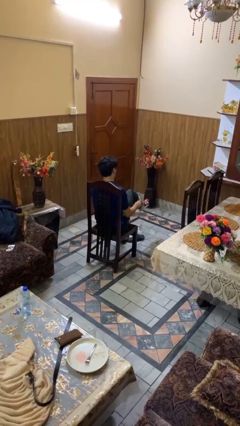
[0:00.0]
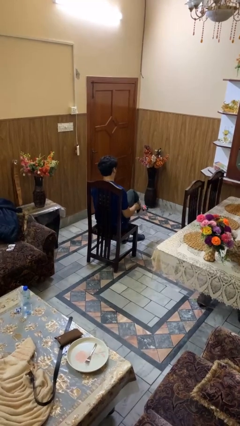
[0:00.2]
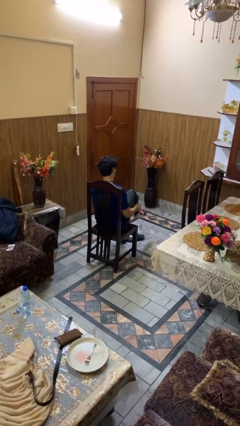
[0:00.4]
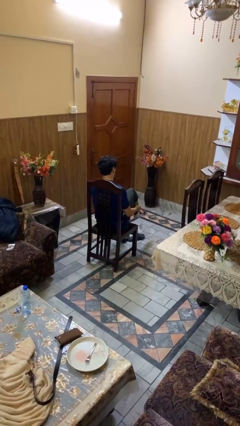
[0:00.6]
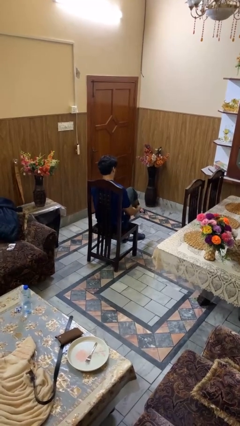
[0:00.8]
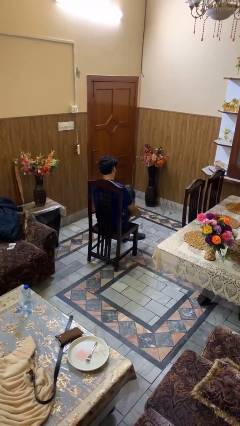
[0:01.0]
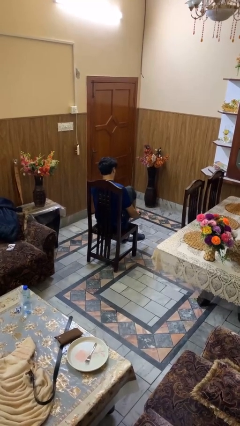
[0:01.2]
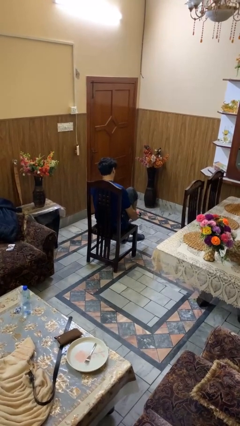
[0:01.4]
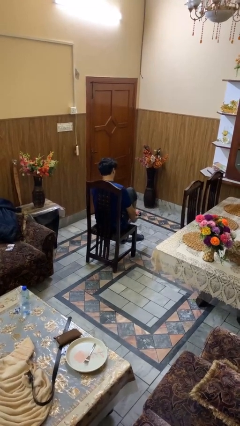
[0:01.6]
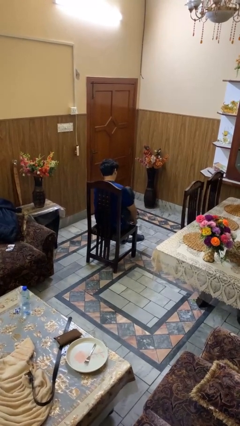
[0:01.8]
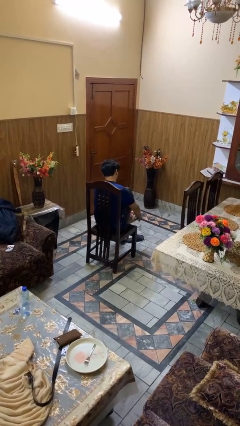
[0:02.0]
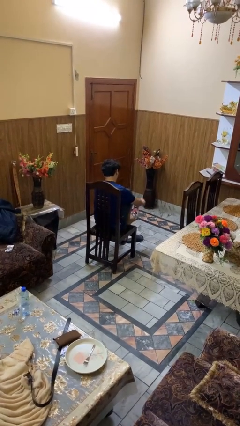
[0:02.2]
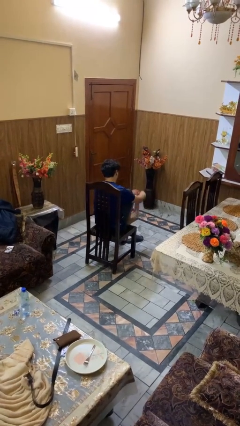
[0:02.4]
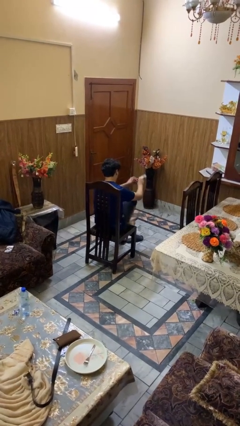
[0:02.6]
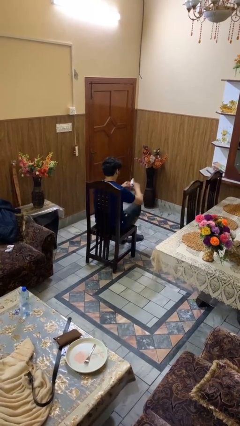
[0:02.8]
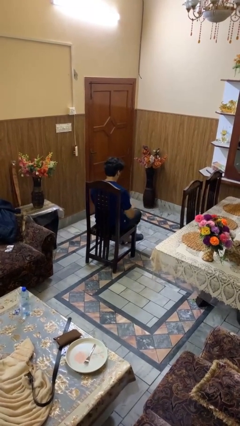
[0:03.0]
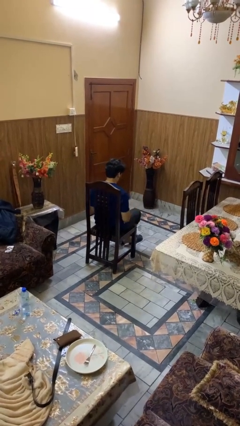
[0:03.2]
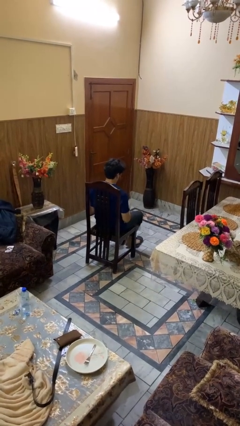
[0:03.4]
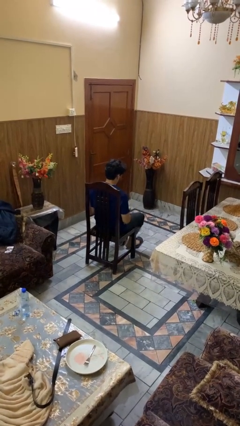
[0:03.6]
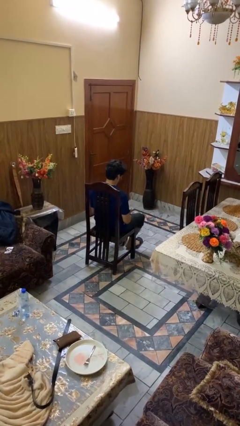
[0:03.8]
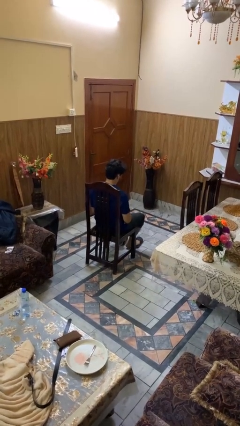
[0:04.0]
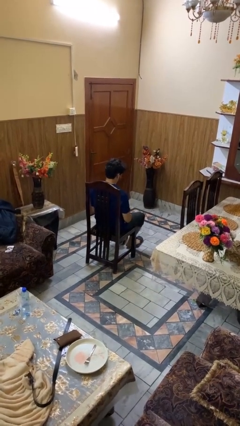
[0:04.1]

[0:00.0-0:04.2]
person takes off socks

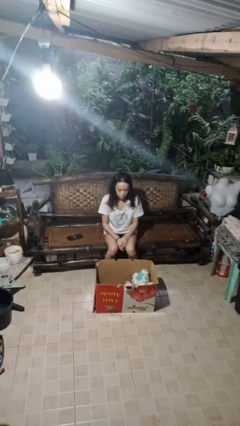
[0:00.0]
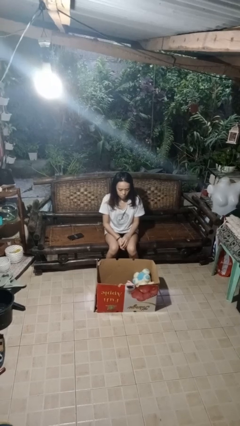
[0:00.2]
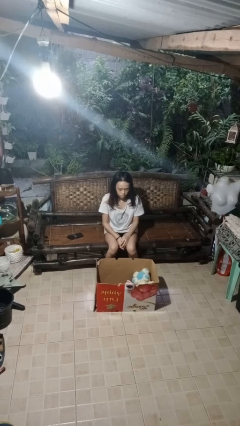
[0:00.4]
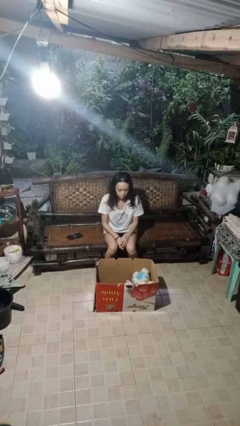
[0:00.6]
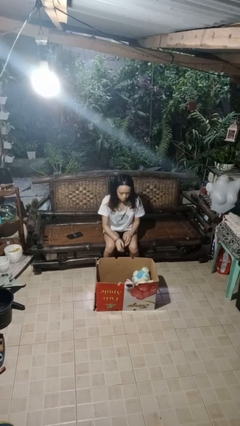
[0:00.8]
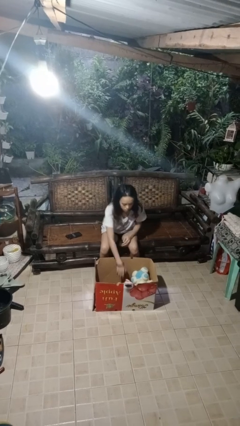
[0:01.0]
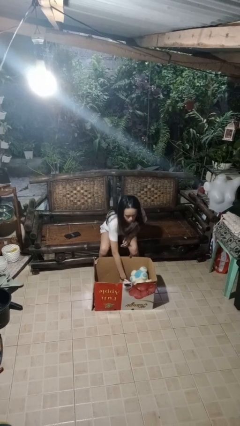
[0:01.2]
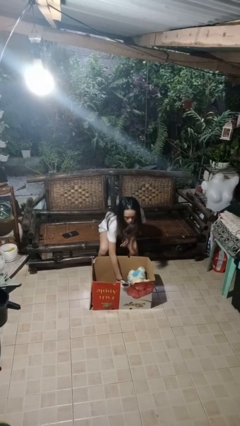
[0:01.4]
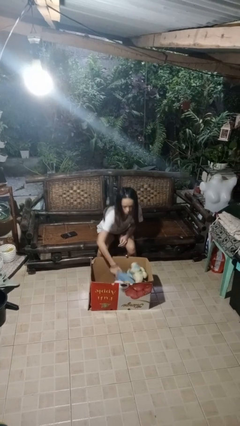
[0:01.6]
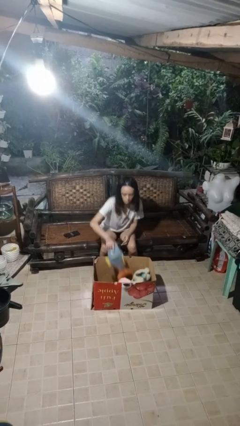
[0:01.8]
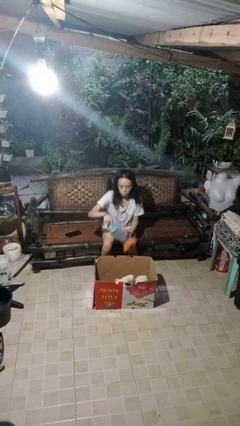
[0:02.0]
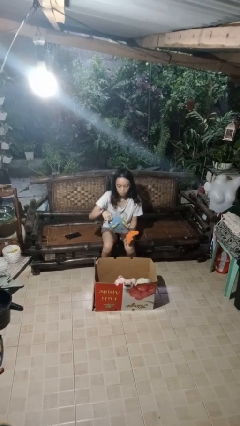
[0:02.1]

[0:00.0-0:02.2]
person takes object from box

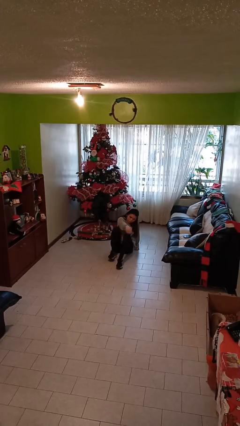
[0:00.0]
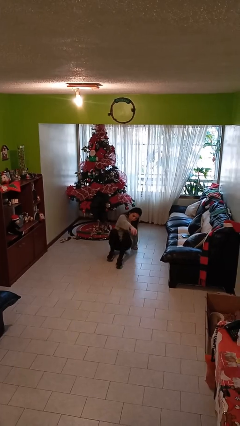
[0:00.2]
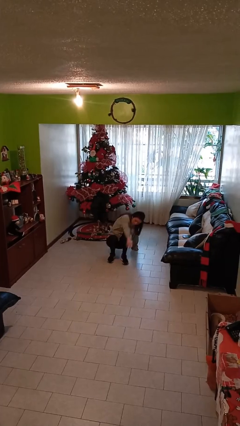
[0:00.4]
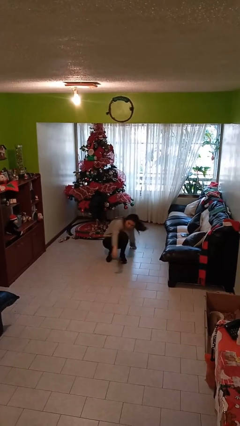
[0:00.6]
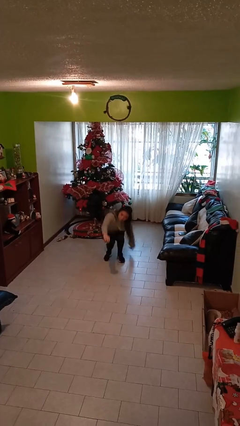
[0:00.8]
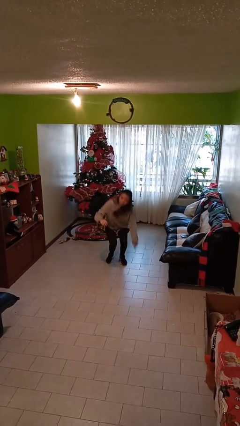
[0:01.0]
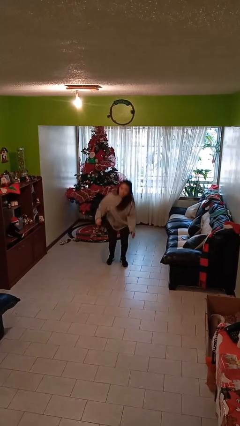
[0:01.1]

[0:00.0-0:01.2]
person stands up

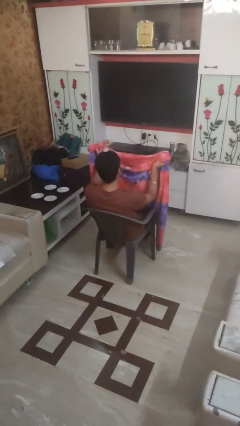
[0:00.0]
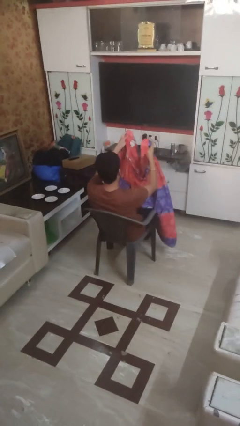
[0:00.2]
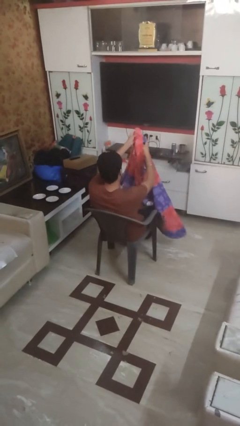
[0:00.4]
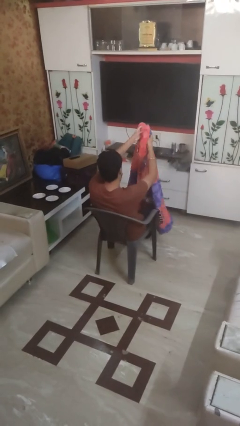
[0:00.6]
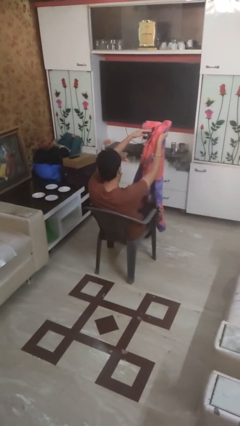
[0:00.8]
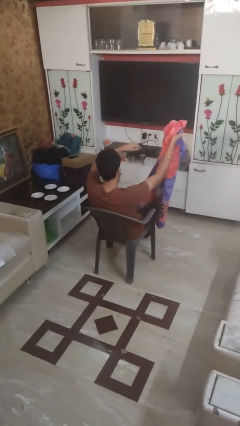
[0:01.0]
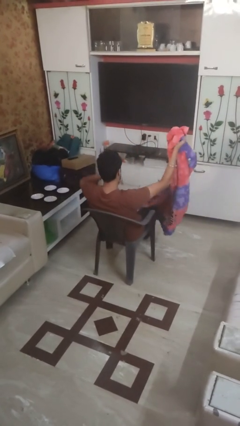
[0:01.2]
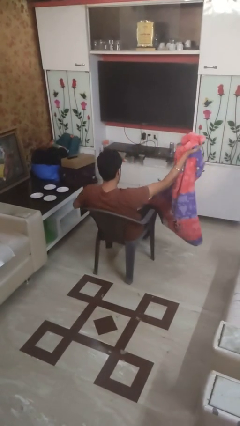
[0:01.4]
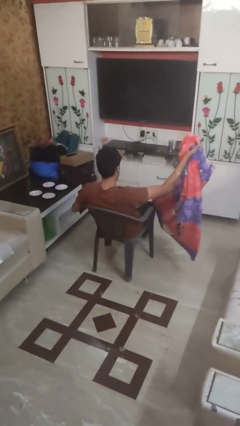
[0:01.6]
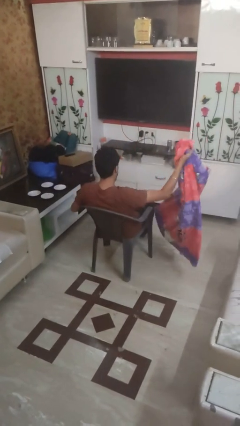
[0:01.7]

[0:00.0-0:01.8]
person uncovers with blanket

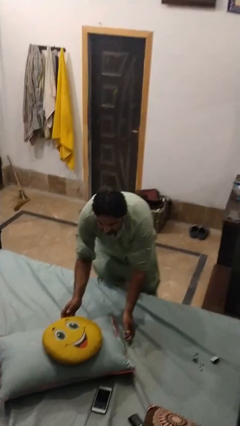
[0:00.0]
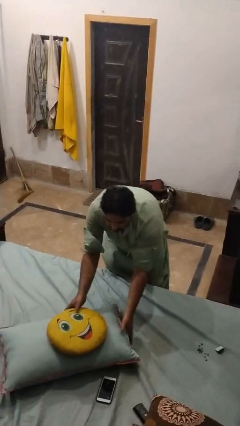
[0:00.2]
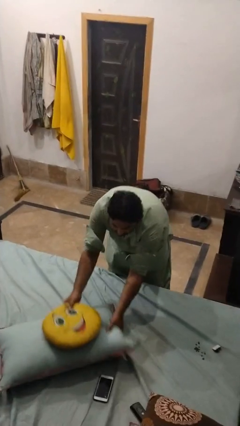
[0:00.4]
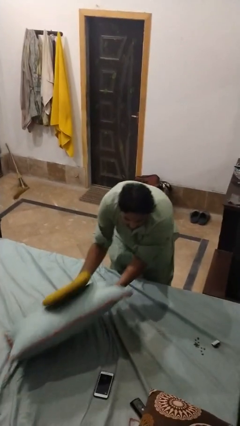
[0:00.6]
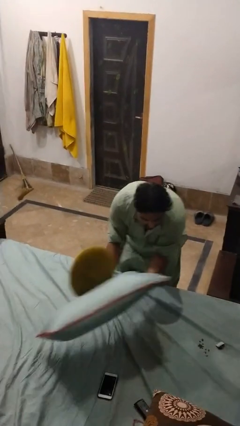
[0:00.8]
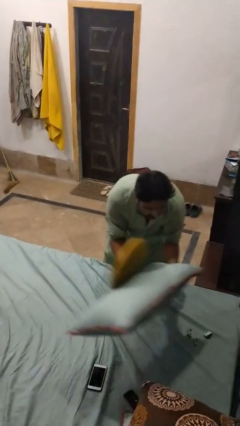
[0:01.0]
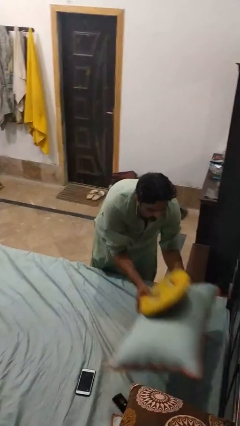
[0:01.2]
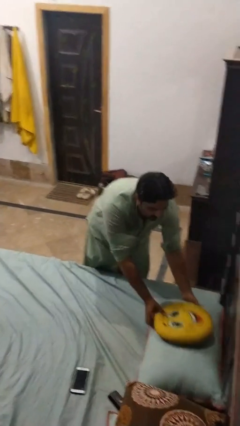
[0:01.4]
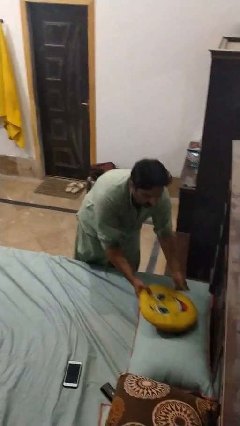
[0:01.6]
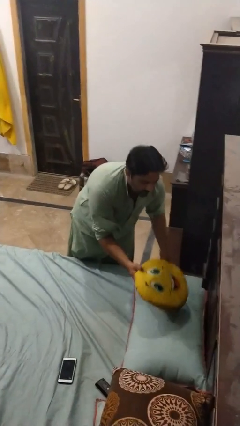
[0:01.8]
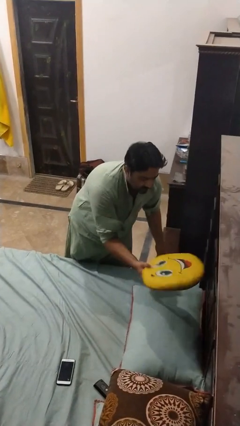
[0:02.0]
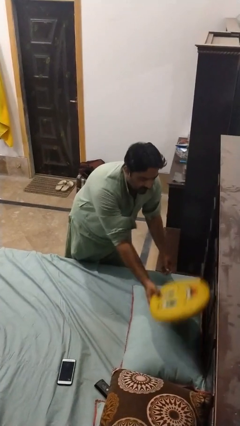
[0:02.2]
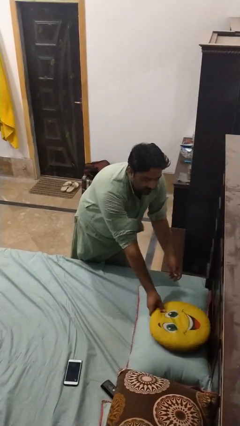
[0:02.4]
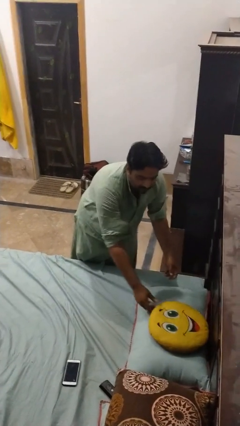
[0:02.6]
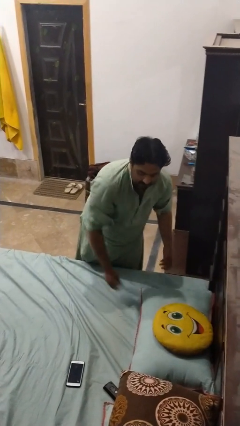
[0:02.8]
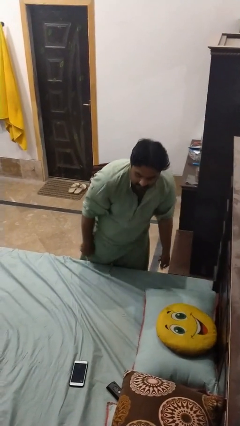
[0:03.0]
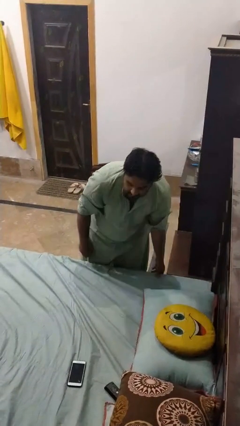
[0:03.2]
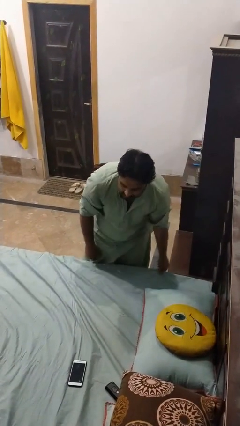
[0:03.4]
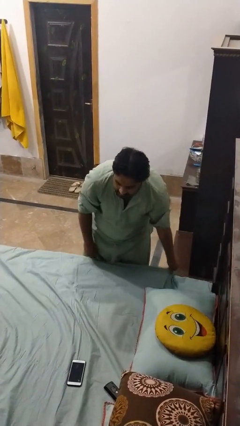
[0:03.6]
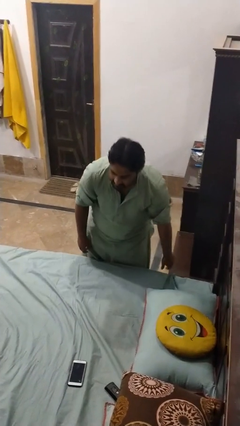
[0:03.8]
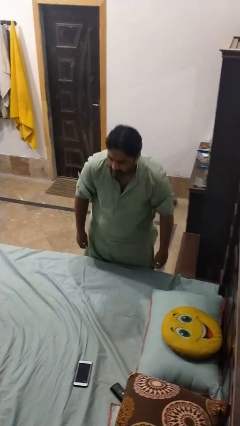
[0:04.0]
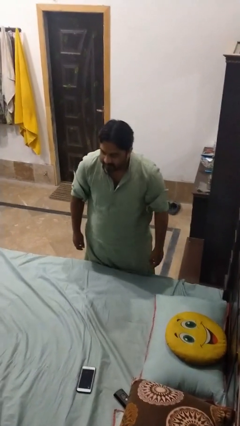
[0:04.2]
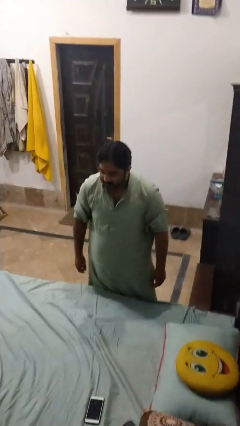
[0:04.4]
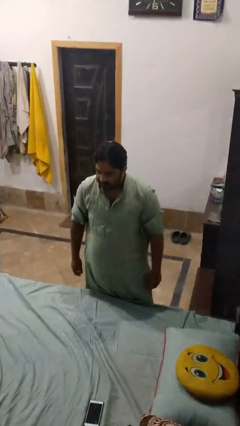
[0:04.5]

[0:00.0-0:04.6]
person makes bed

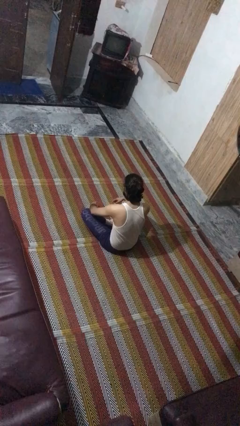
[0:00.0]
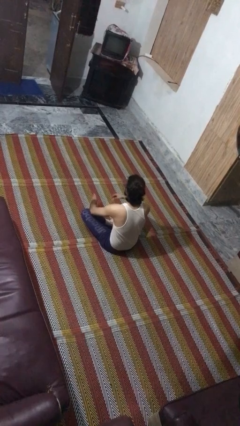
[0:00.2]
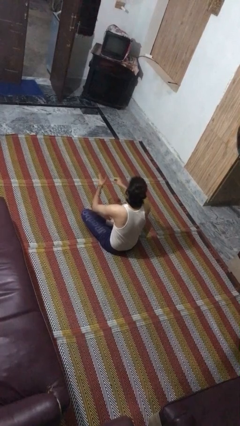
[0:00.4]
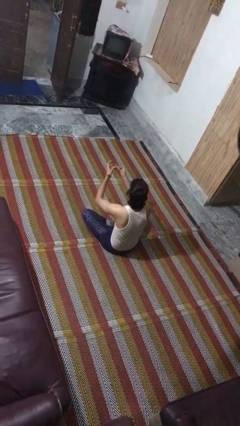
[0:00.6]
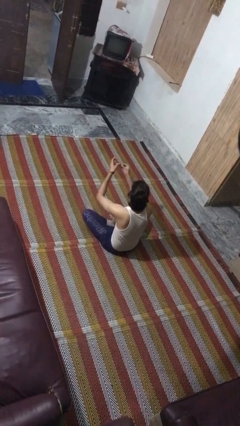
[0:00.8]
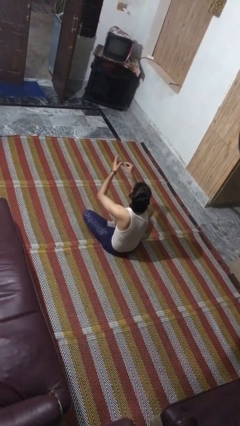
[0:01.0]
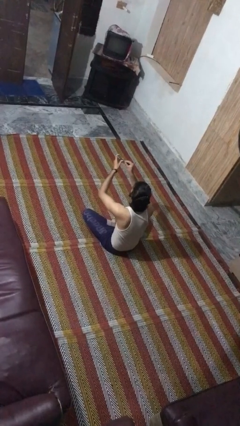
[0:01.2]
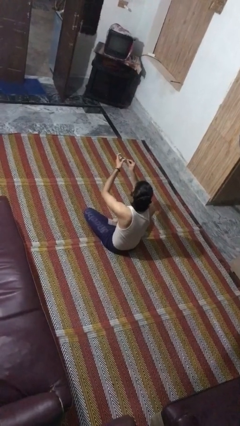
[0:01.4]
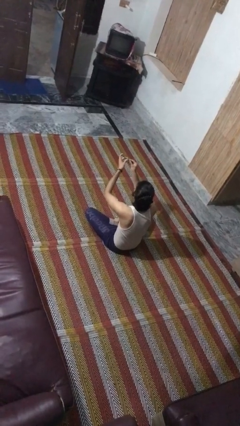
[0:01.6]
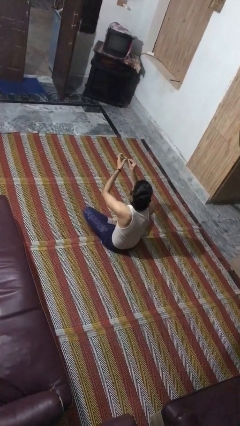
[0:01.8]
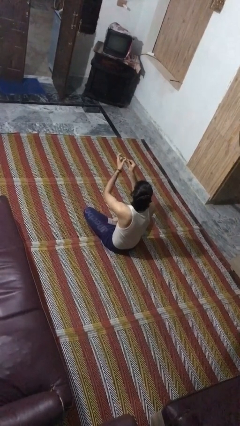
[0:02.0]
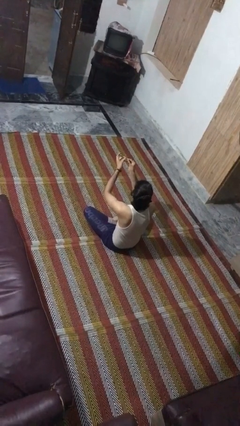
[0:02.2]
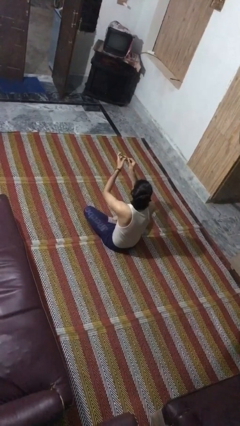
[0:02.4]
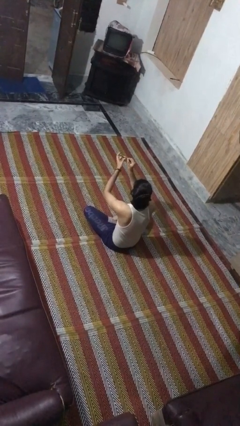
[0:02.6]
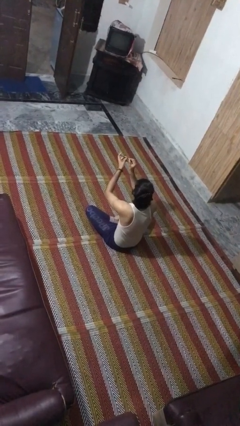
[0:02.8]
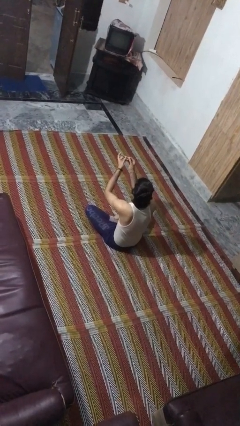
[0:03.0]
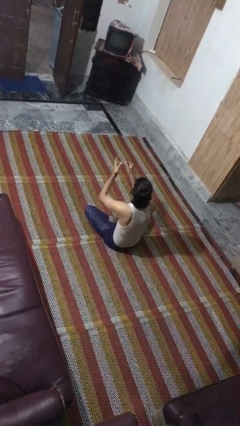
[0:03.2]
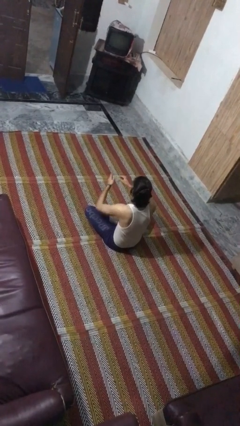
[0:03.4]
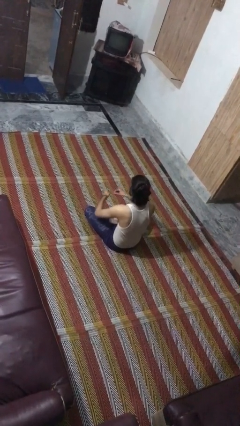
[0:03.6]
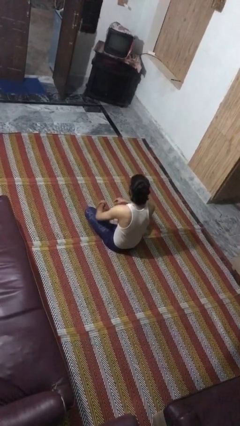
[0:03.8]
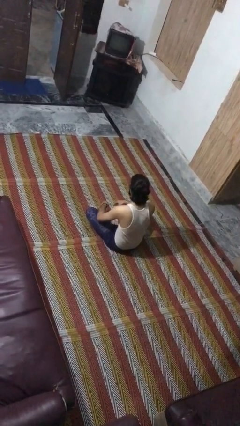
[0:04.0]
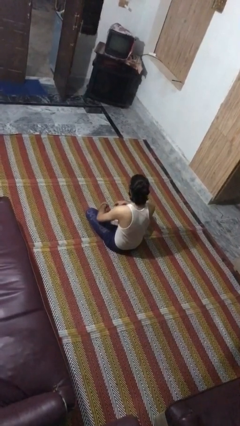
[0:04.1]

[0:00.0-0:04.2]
person clips fingernails
